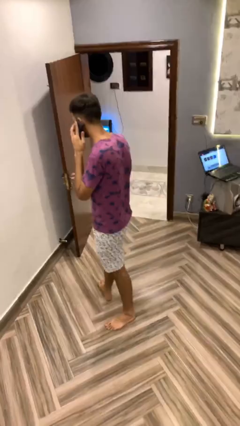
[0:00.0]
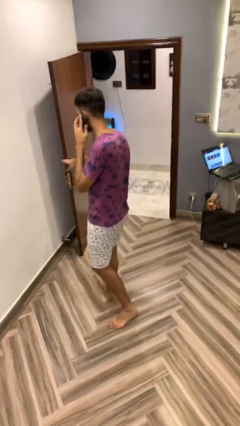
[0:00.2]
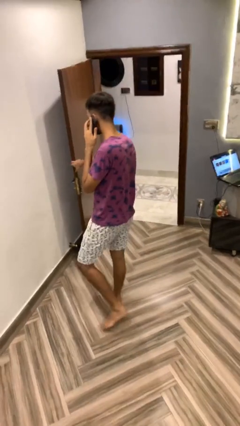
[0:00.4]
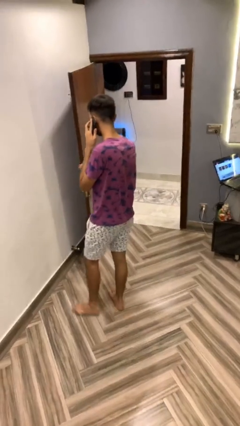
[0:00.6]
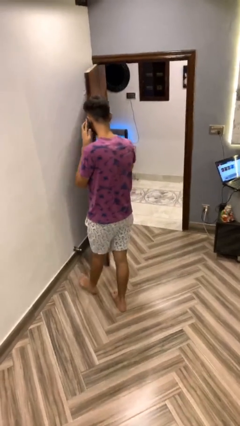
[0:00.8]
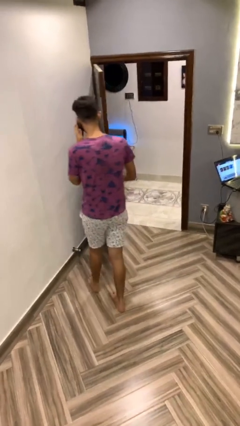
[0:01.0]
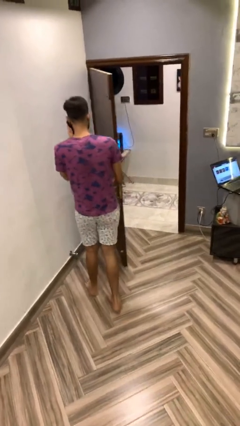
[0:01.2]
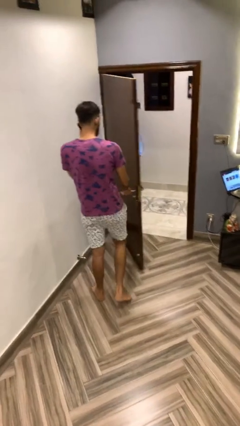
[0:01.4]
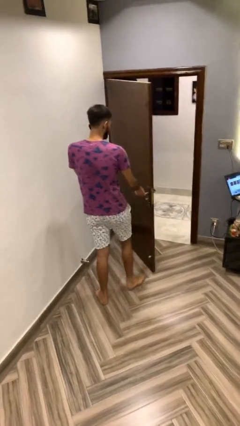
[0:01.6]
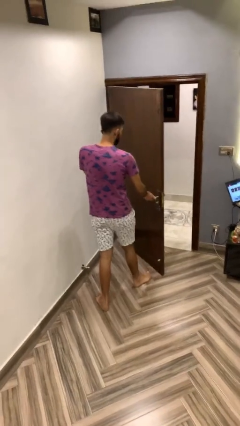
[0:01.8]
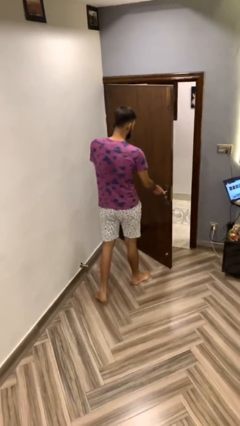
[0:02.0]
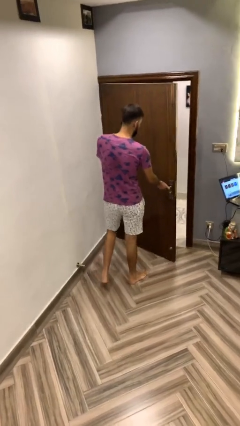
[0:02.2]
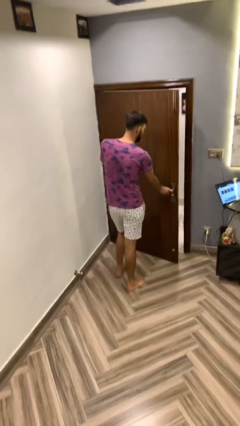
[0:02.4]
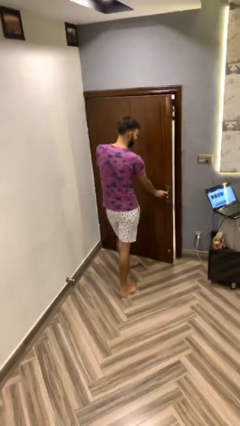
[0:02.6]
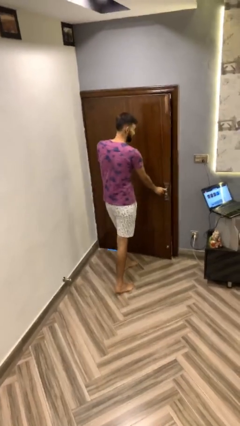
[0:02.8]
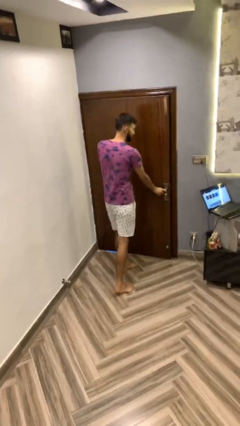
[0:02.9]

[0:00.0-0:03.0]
person closes facility door

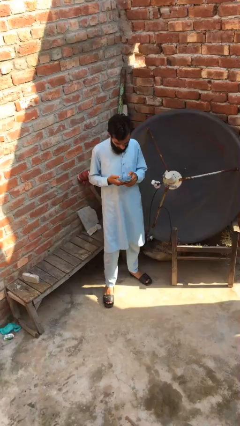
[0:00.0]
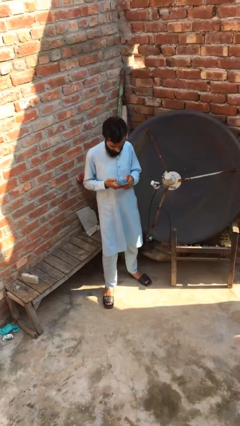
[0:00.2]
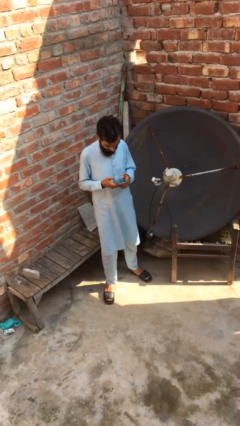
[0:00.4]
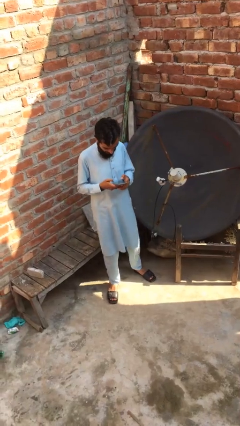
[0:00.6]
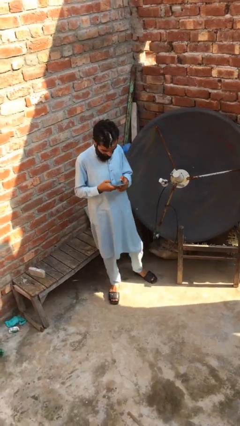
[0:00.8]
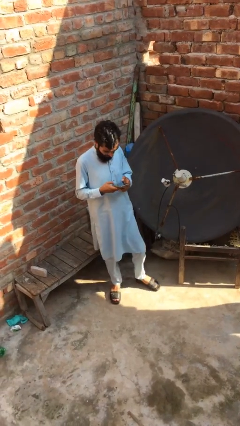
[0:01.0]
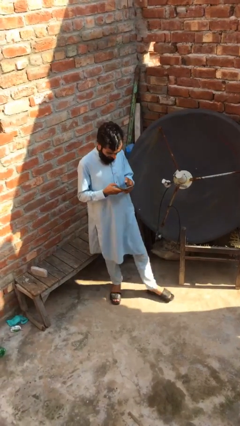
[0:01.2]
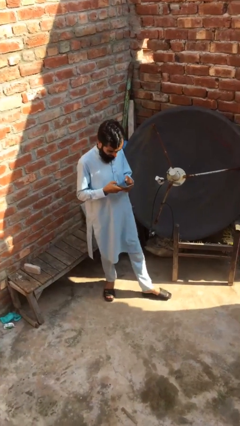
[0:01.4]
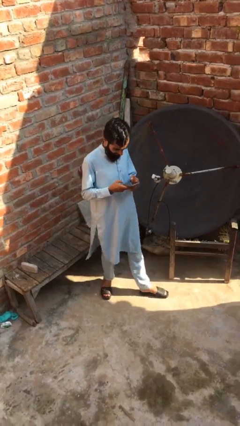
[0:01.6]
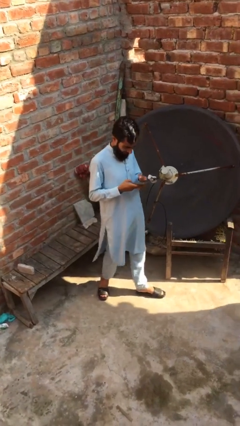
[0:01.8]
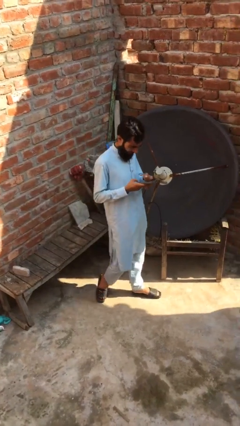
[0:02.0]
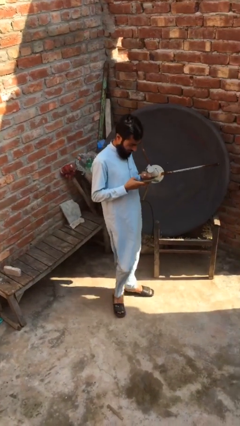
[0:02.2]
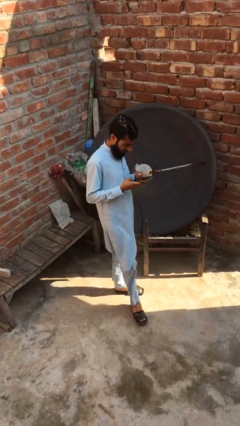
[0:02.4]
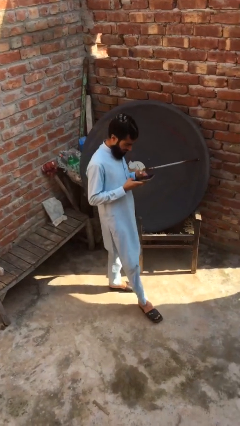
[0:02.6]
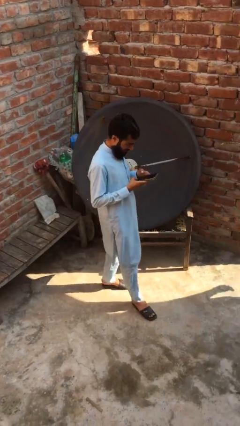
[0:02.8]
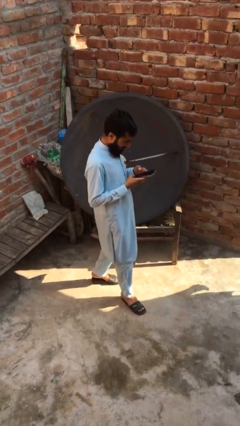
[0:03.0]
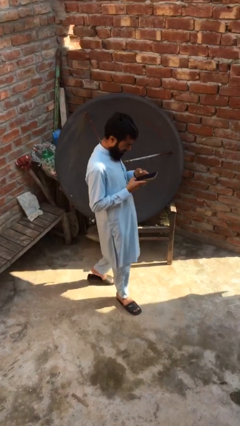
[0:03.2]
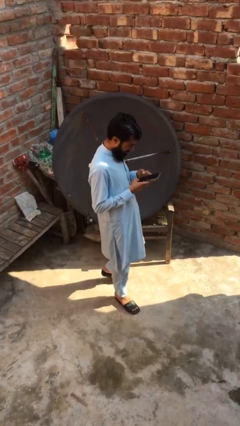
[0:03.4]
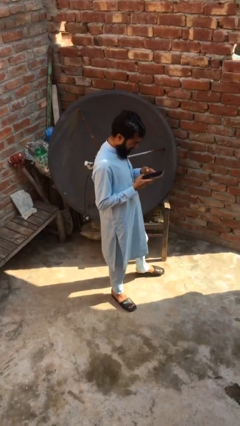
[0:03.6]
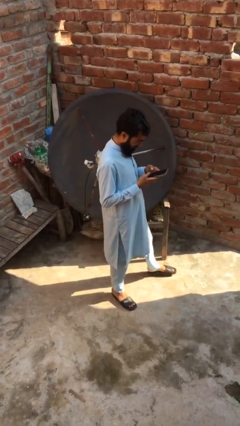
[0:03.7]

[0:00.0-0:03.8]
person texts on phone

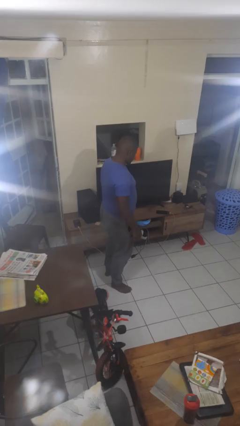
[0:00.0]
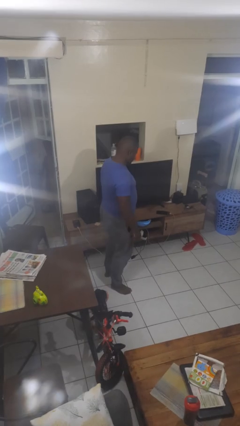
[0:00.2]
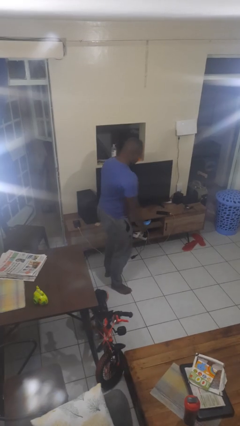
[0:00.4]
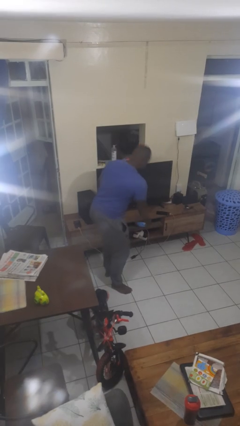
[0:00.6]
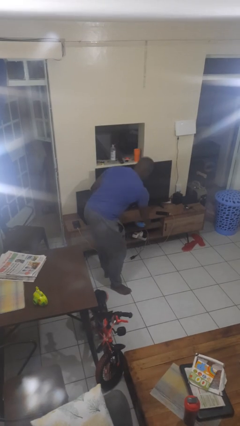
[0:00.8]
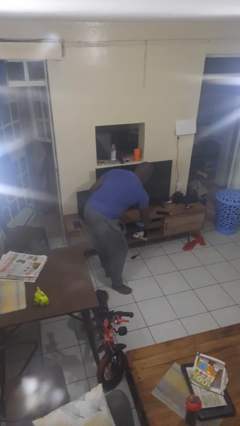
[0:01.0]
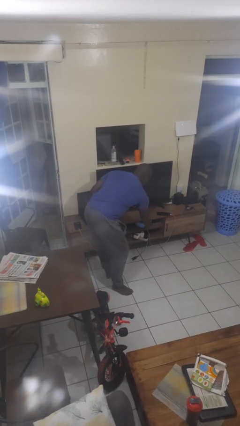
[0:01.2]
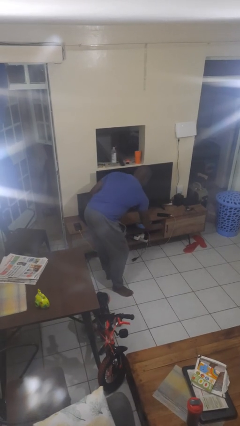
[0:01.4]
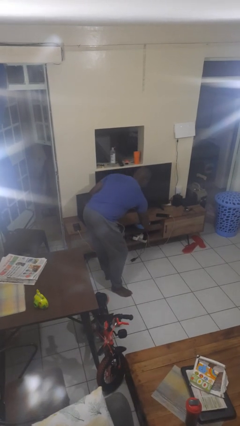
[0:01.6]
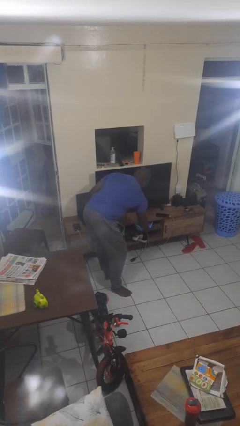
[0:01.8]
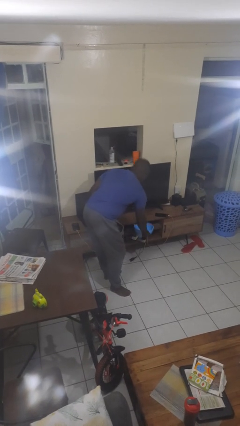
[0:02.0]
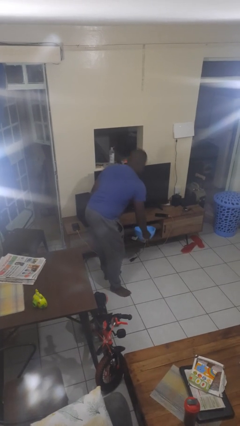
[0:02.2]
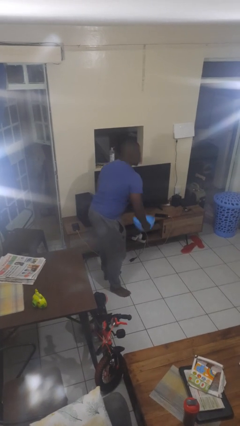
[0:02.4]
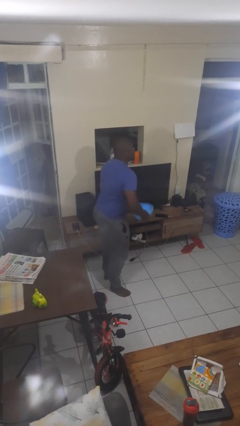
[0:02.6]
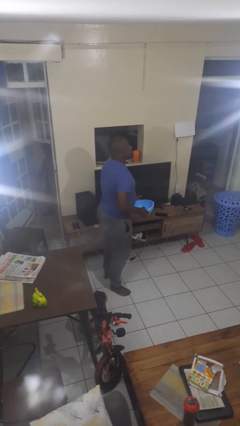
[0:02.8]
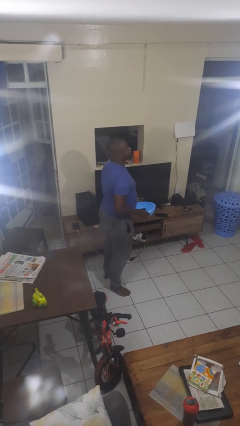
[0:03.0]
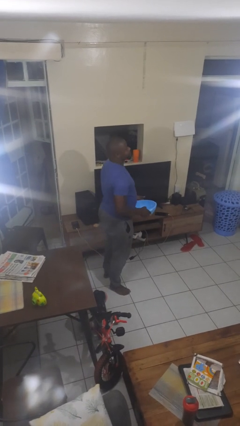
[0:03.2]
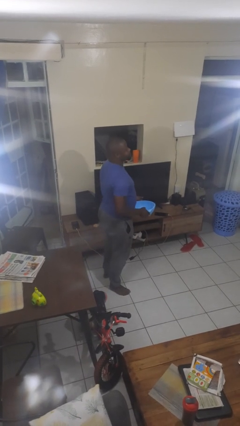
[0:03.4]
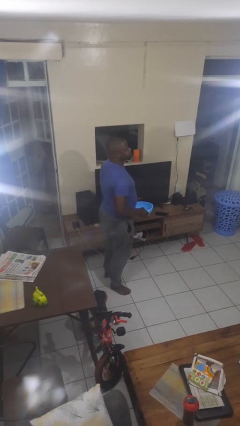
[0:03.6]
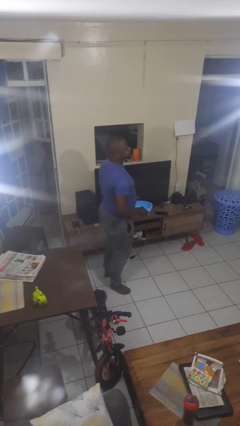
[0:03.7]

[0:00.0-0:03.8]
person picks up object from cabinet

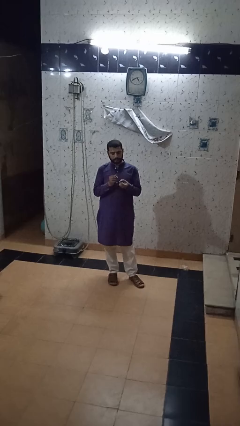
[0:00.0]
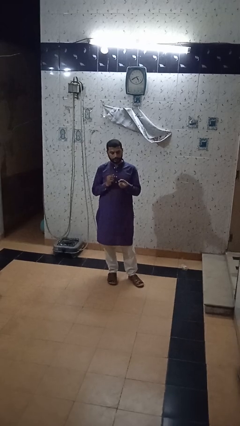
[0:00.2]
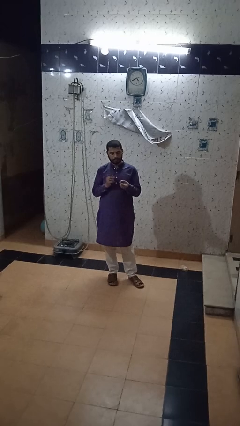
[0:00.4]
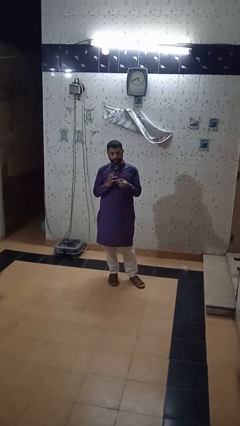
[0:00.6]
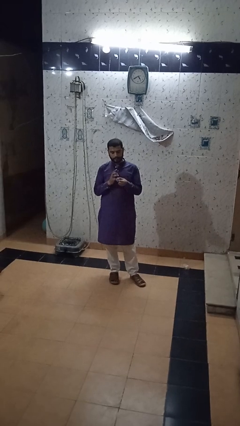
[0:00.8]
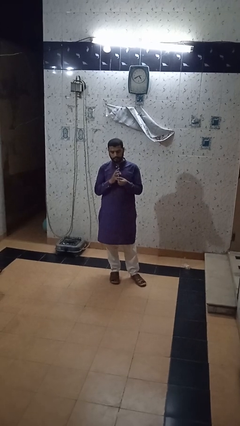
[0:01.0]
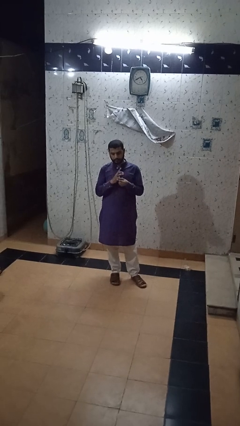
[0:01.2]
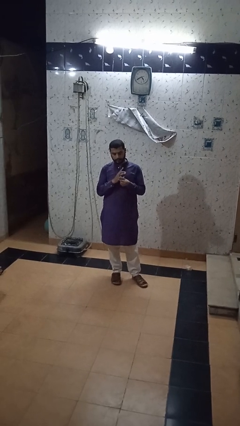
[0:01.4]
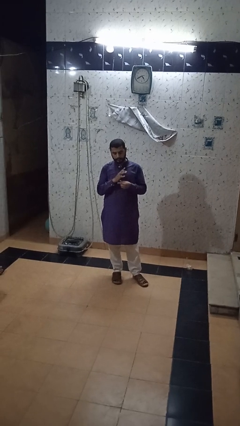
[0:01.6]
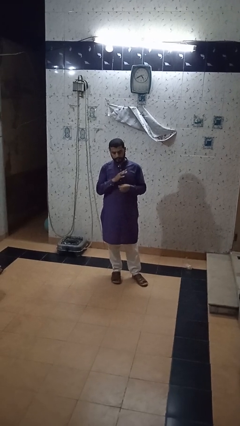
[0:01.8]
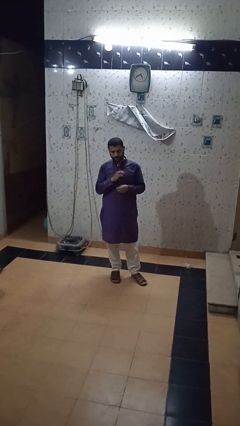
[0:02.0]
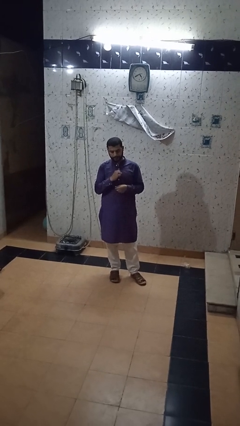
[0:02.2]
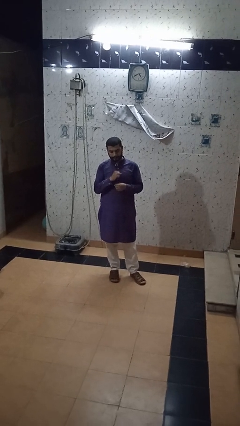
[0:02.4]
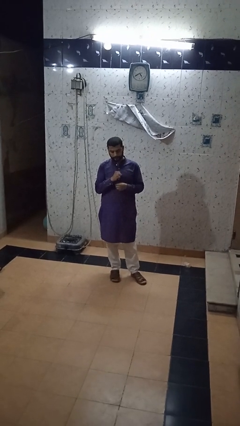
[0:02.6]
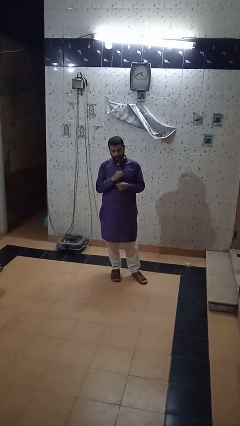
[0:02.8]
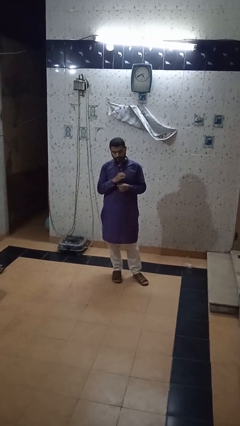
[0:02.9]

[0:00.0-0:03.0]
person puts on ring

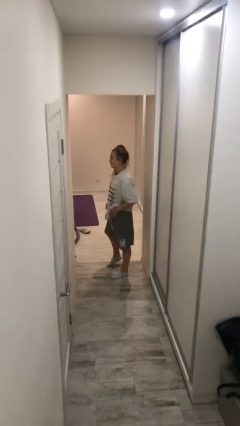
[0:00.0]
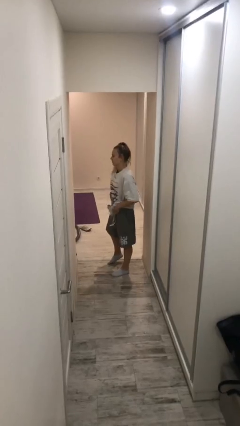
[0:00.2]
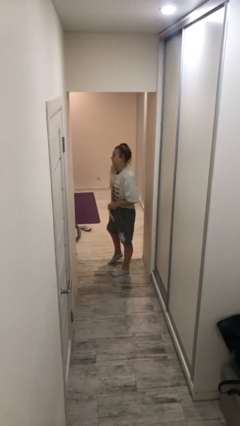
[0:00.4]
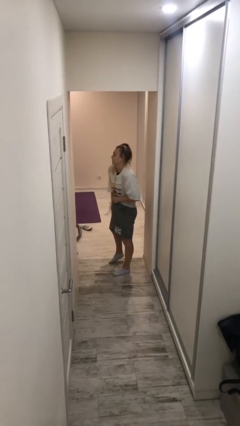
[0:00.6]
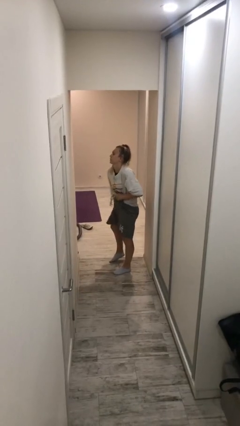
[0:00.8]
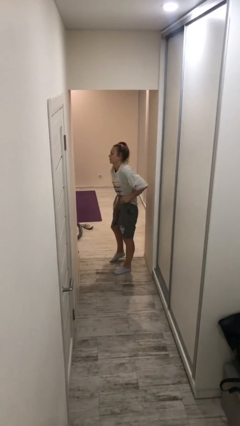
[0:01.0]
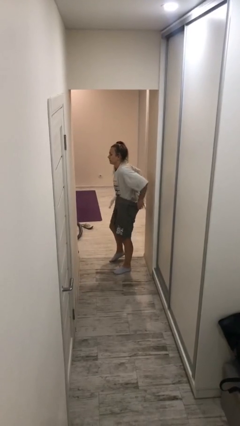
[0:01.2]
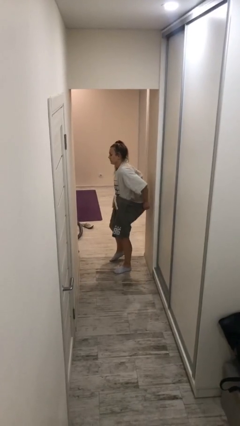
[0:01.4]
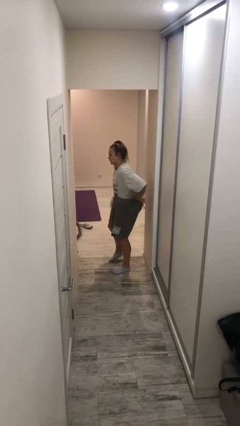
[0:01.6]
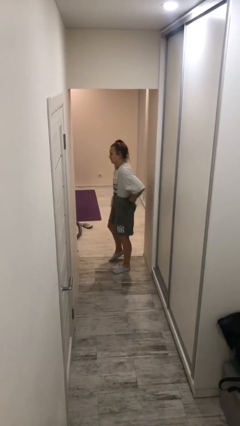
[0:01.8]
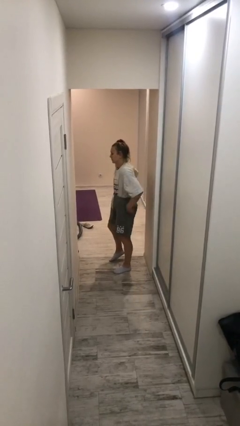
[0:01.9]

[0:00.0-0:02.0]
person tucks in shirt

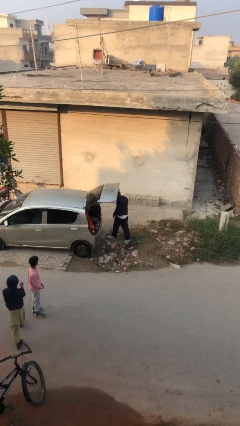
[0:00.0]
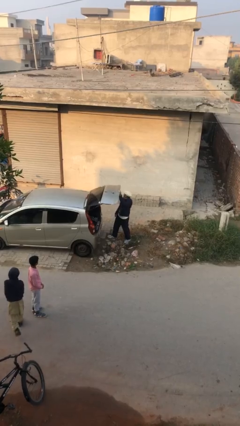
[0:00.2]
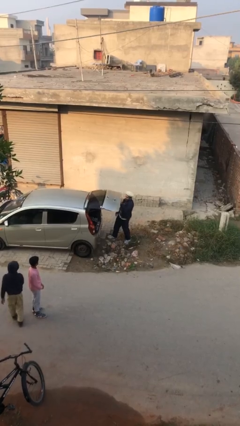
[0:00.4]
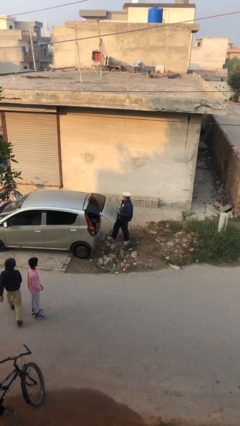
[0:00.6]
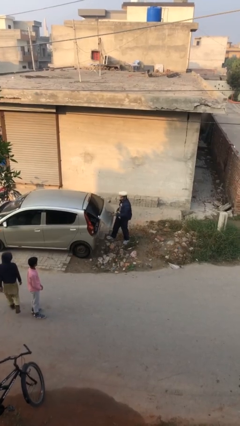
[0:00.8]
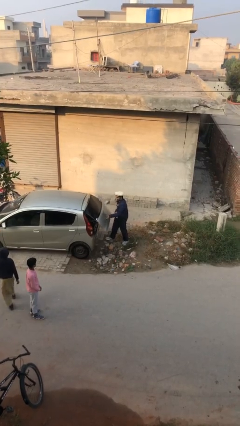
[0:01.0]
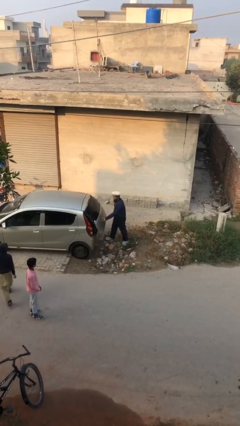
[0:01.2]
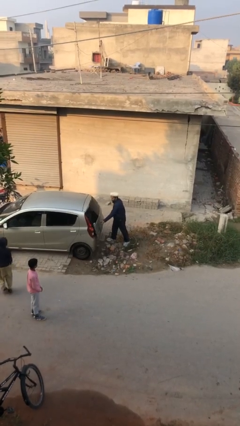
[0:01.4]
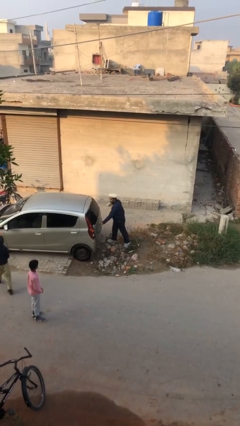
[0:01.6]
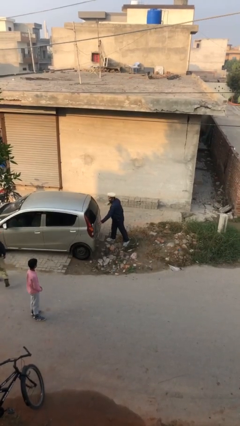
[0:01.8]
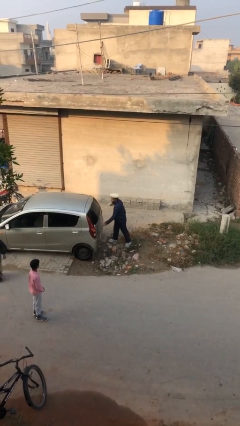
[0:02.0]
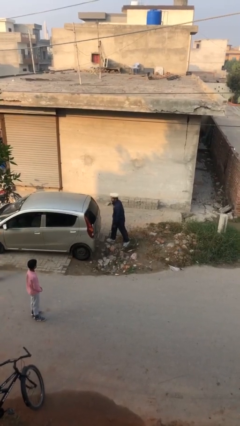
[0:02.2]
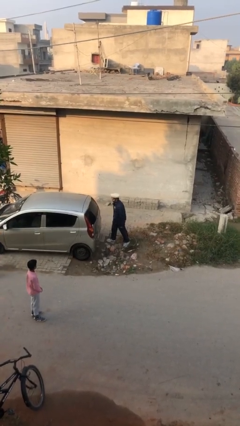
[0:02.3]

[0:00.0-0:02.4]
person closes car trunk
